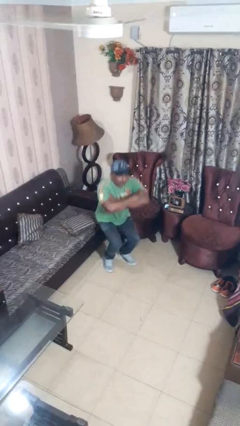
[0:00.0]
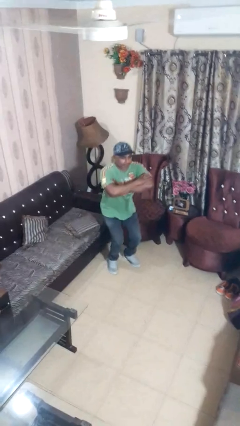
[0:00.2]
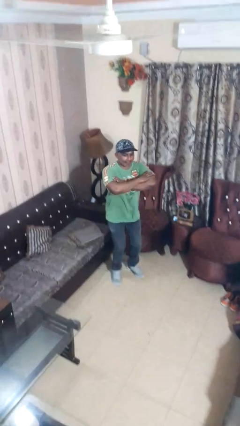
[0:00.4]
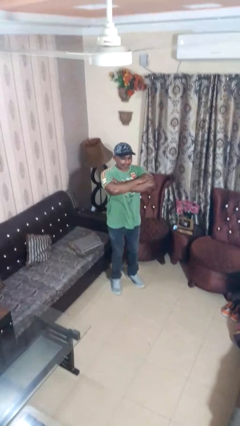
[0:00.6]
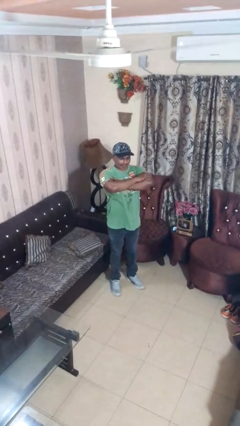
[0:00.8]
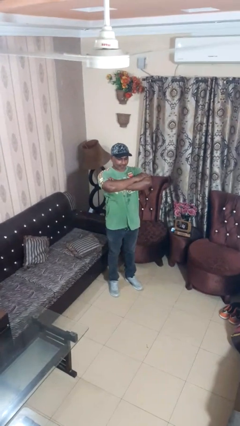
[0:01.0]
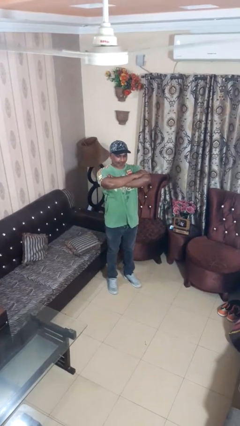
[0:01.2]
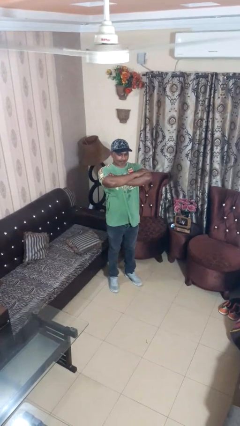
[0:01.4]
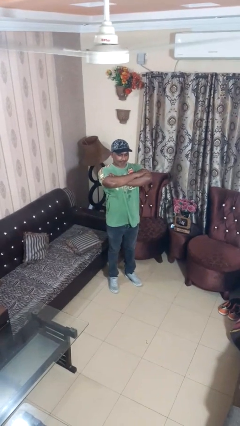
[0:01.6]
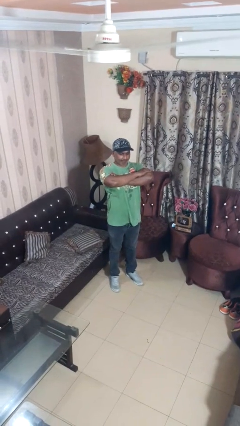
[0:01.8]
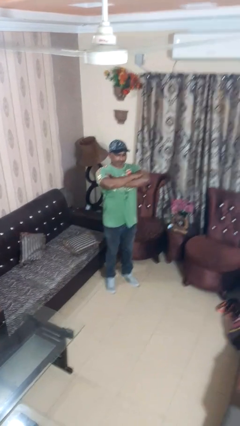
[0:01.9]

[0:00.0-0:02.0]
person stands up

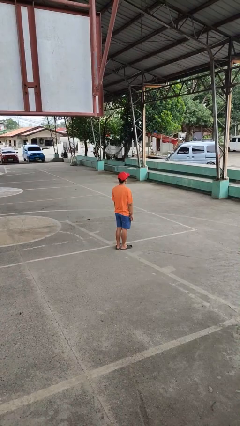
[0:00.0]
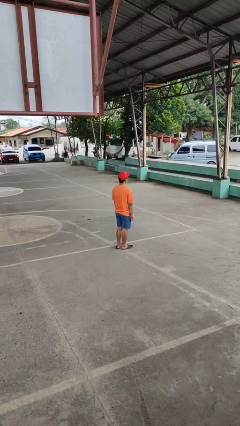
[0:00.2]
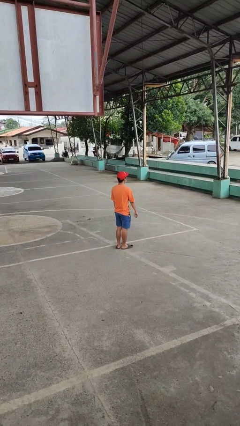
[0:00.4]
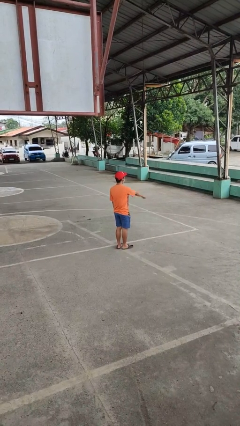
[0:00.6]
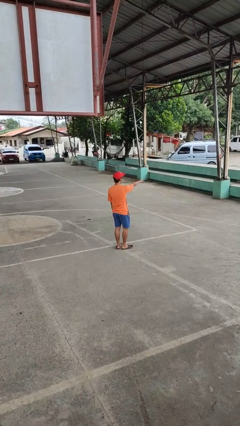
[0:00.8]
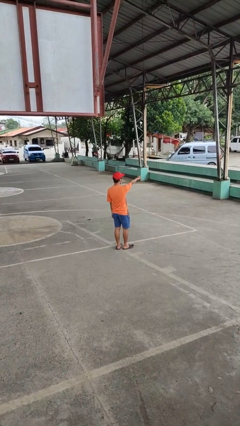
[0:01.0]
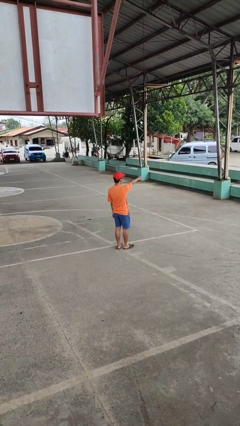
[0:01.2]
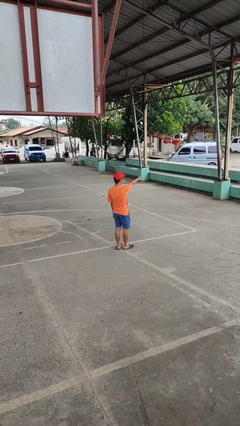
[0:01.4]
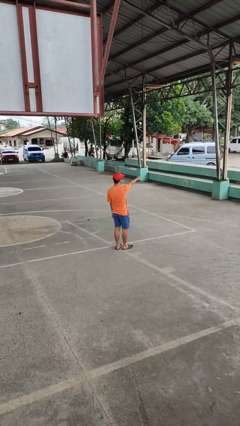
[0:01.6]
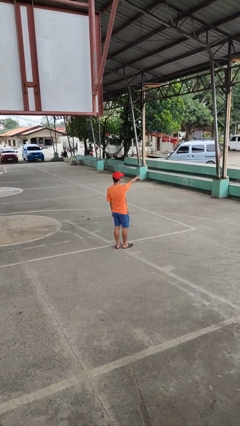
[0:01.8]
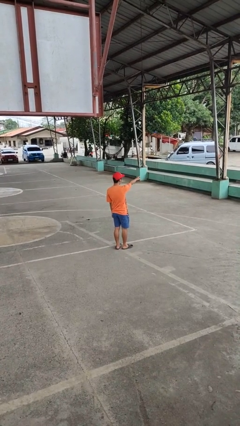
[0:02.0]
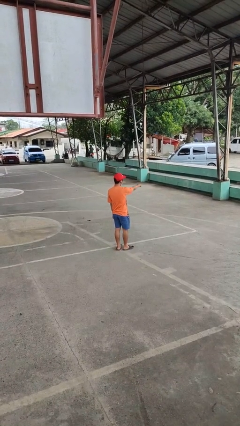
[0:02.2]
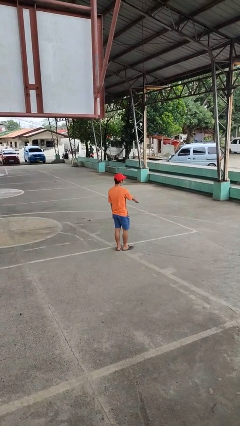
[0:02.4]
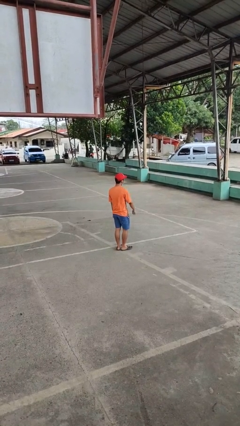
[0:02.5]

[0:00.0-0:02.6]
person points at person

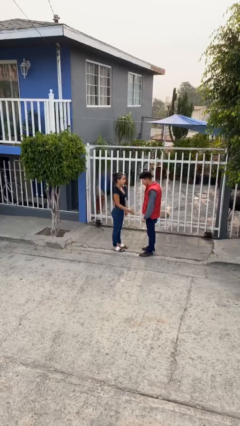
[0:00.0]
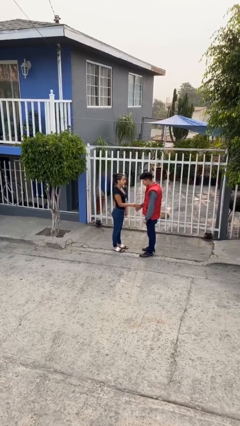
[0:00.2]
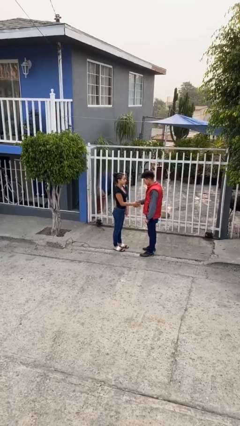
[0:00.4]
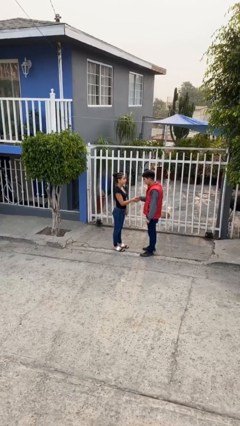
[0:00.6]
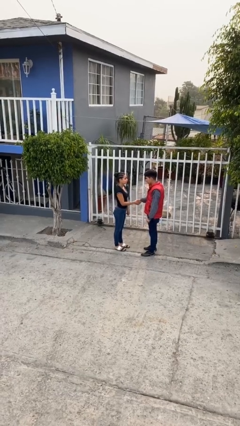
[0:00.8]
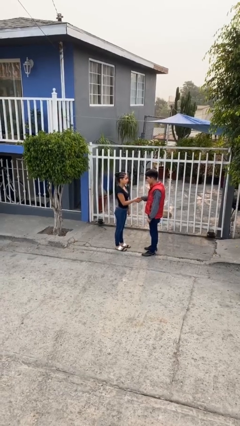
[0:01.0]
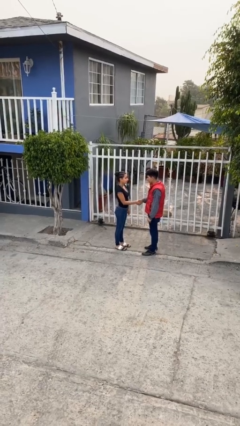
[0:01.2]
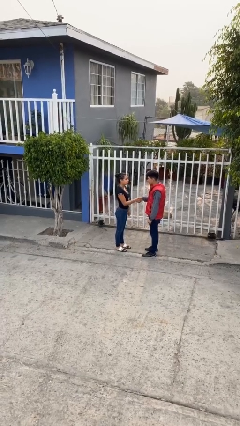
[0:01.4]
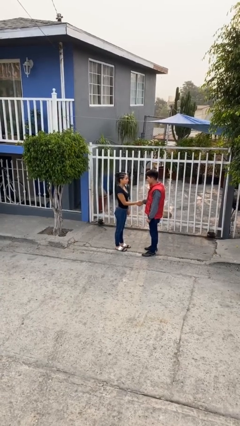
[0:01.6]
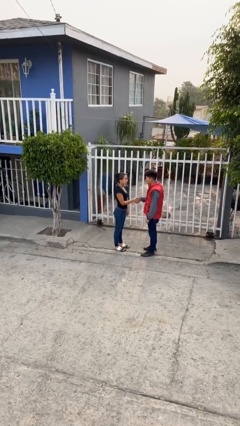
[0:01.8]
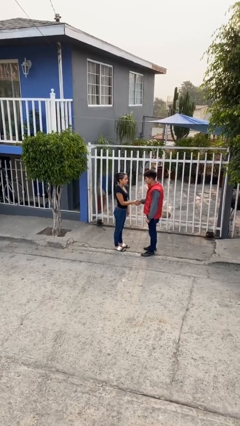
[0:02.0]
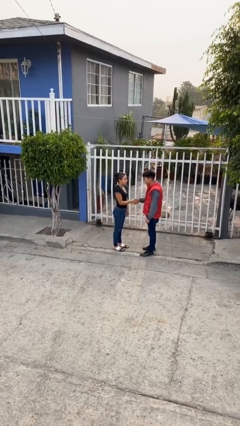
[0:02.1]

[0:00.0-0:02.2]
person shakes hand

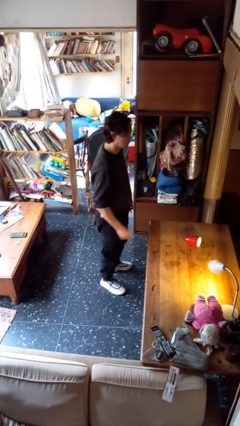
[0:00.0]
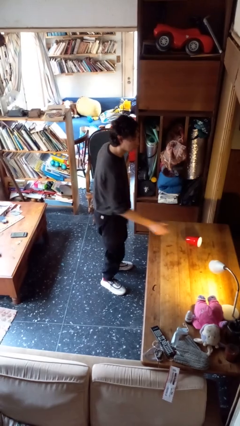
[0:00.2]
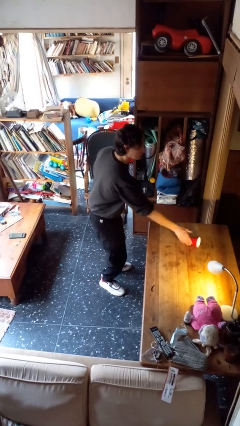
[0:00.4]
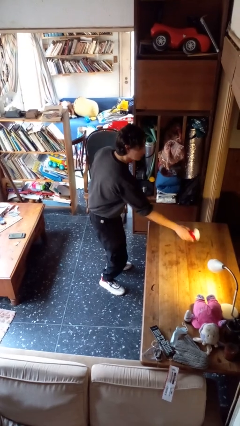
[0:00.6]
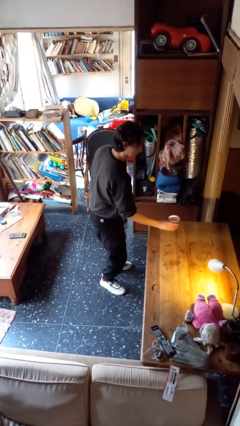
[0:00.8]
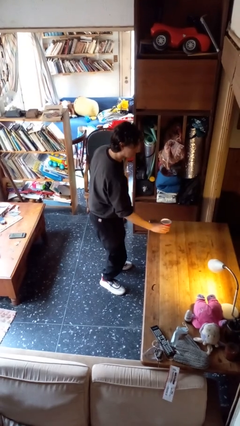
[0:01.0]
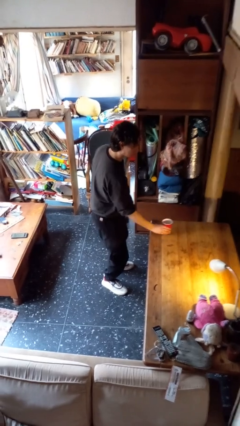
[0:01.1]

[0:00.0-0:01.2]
person sets upright glass

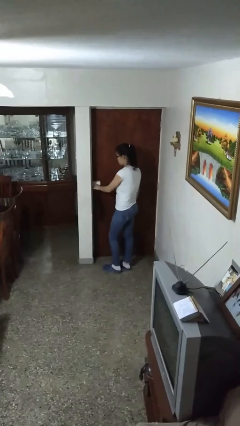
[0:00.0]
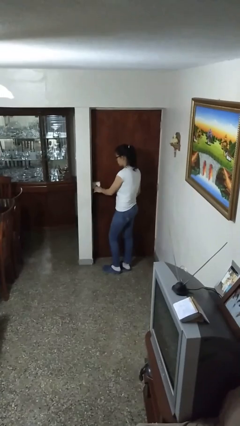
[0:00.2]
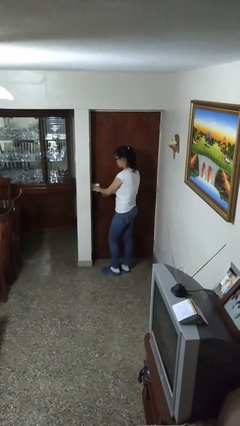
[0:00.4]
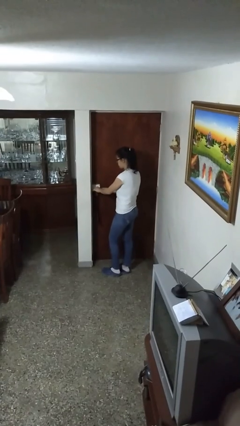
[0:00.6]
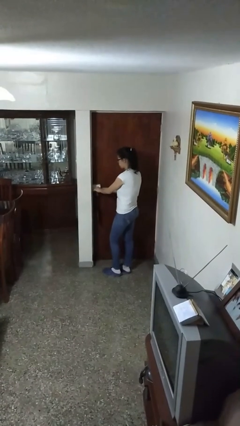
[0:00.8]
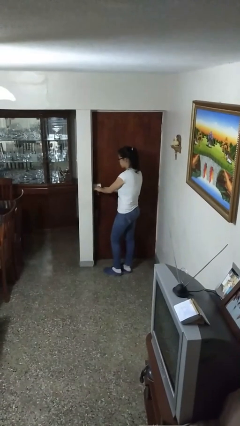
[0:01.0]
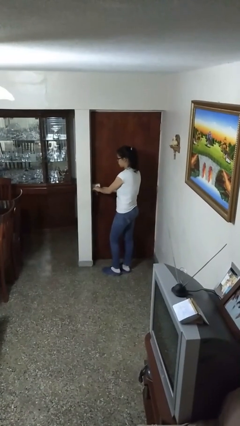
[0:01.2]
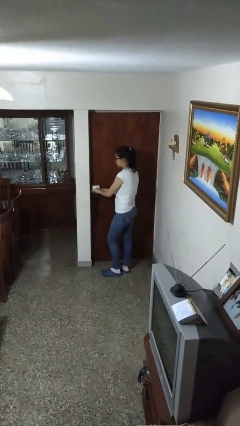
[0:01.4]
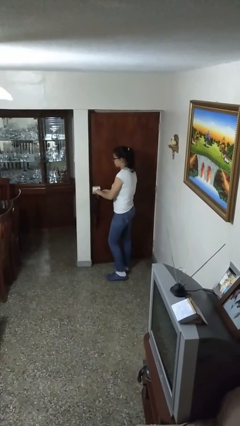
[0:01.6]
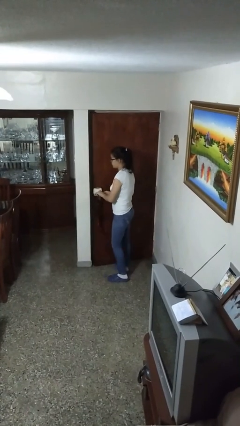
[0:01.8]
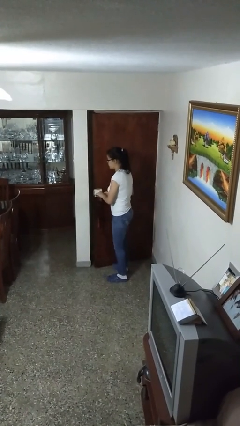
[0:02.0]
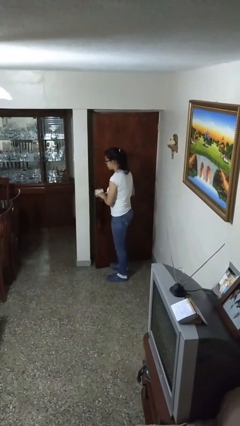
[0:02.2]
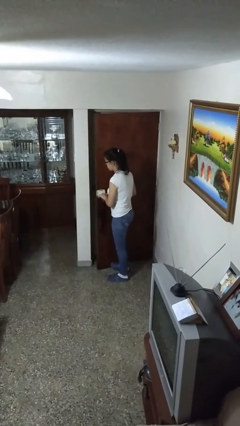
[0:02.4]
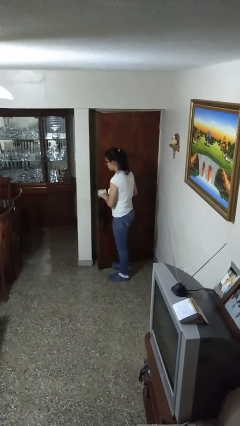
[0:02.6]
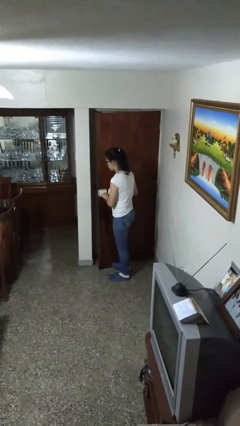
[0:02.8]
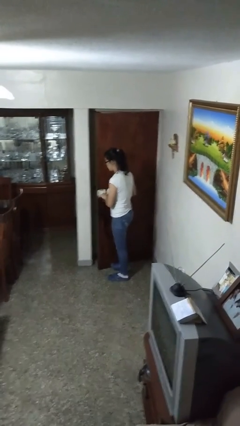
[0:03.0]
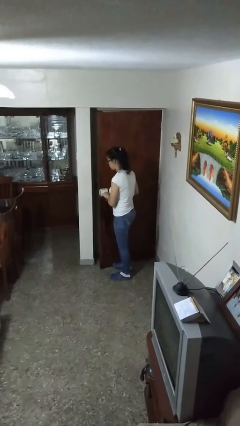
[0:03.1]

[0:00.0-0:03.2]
person opens facility door

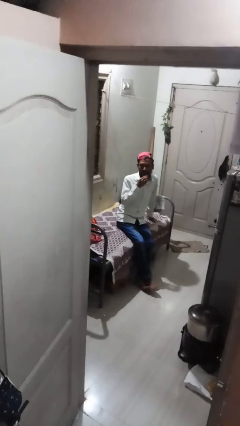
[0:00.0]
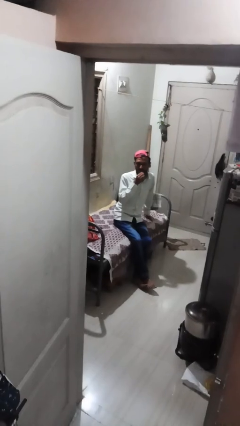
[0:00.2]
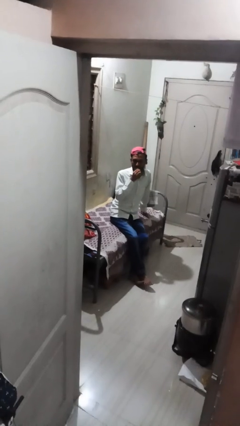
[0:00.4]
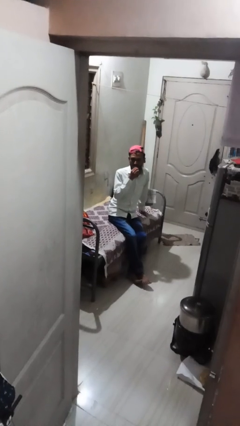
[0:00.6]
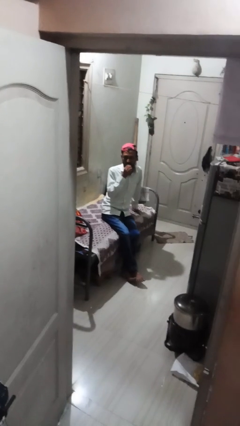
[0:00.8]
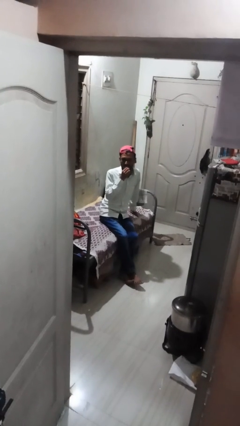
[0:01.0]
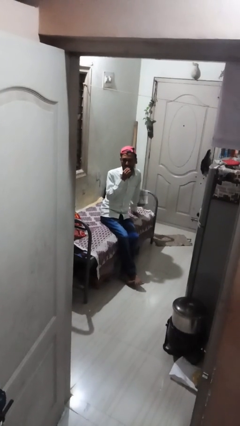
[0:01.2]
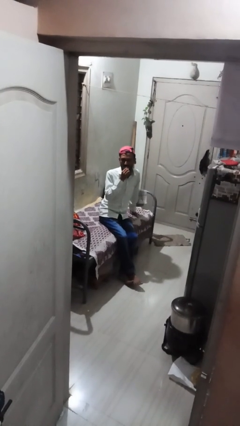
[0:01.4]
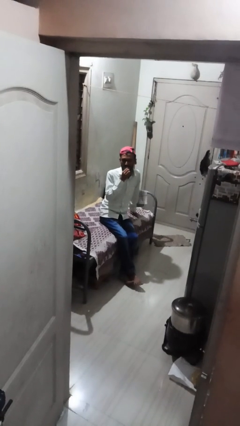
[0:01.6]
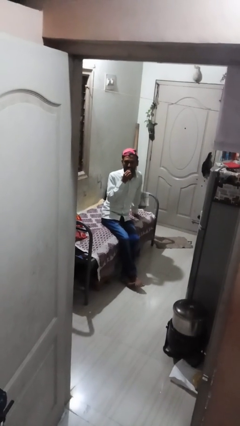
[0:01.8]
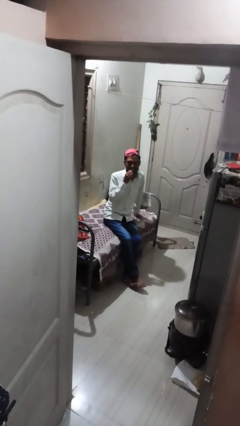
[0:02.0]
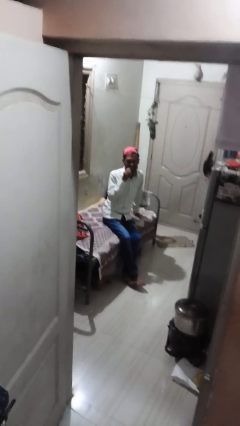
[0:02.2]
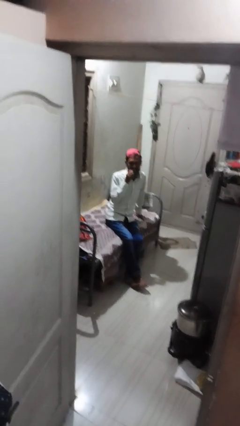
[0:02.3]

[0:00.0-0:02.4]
person flosses

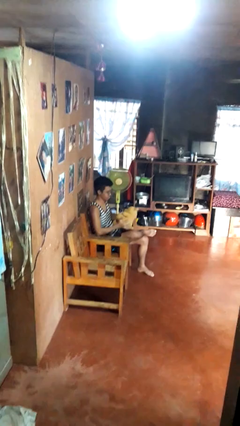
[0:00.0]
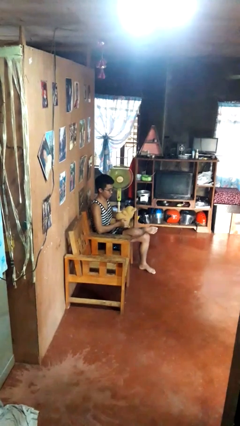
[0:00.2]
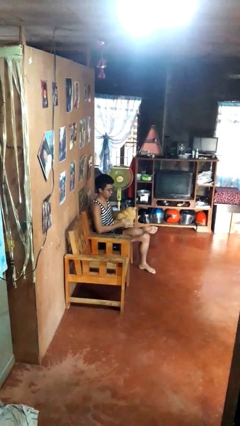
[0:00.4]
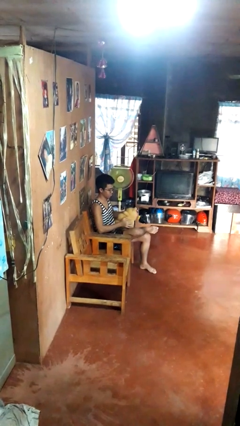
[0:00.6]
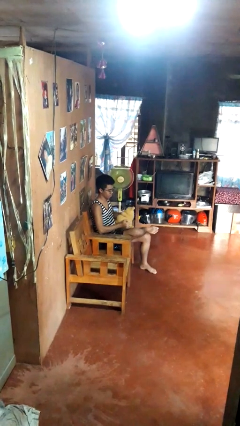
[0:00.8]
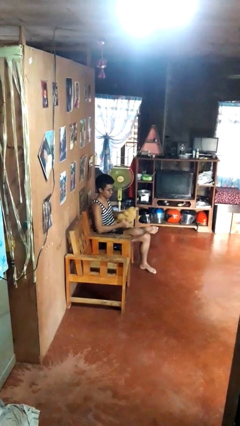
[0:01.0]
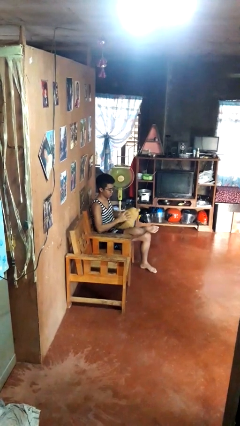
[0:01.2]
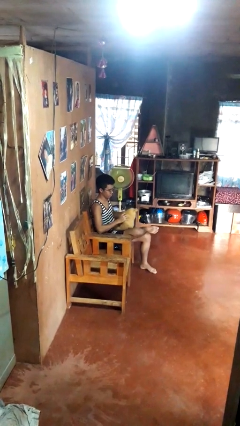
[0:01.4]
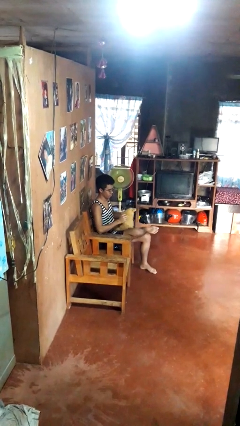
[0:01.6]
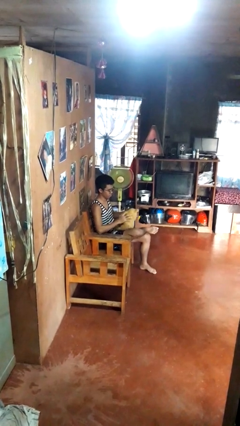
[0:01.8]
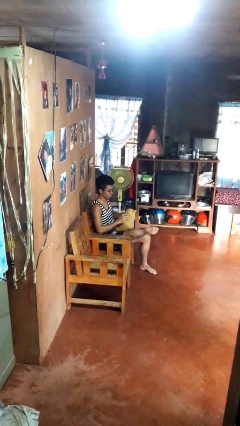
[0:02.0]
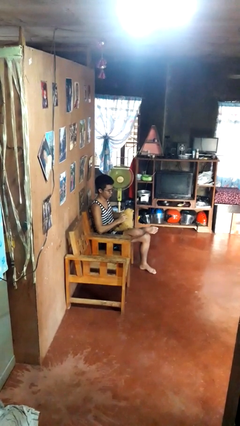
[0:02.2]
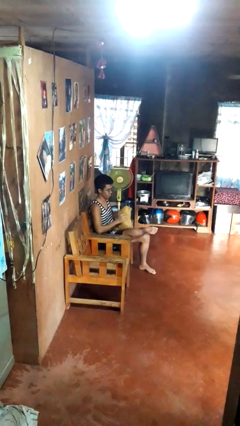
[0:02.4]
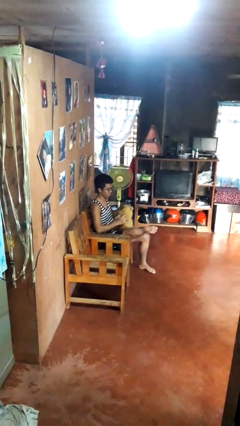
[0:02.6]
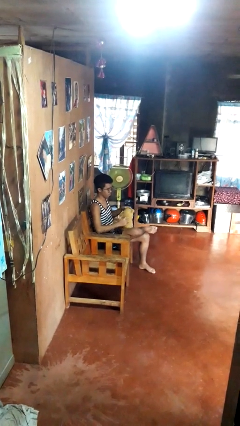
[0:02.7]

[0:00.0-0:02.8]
person squeezes object

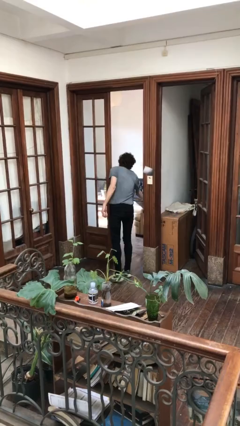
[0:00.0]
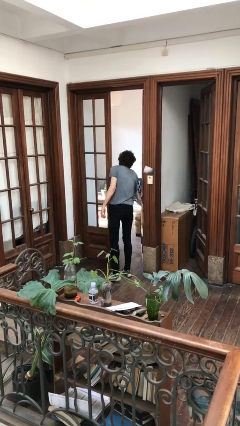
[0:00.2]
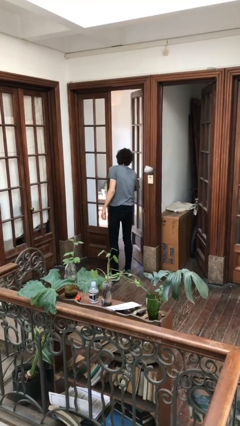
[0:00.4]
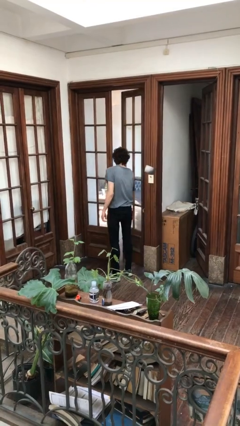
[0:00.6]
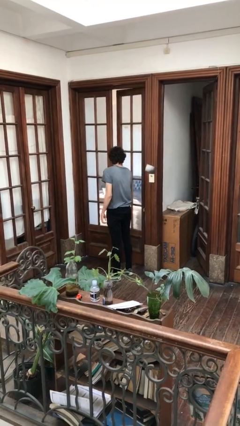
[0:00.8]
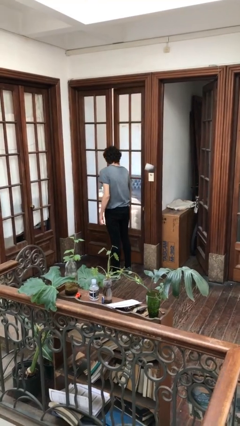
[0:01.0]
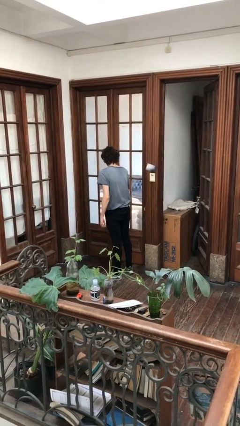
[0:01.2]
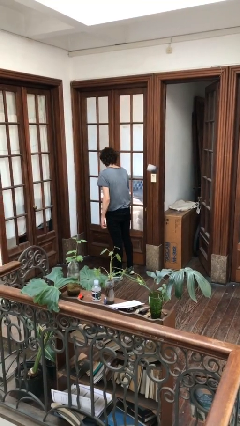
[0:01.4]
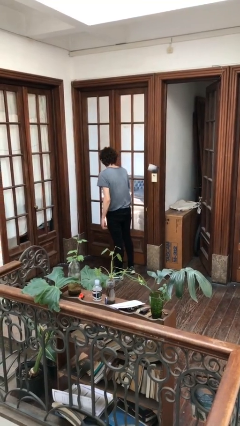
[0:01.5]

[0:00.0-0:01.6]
person closes facility door
